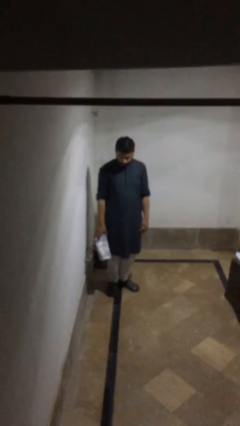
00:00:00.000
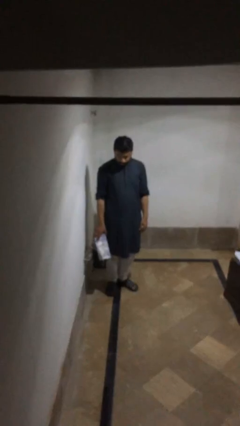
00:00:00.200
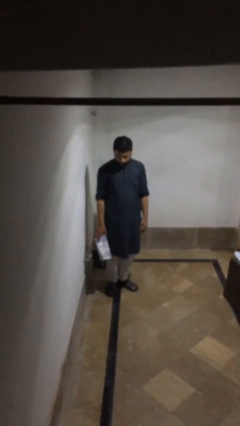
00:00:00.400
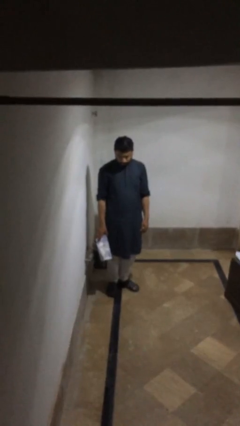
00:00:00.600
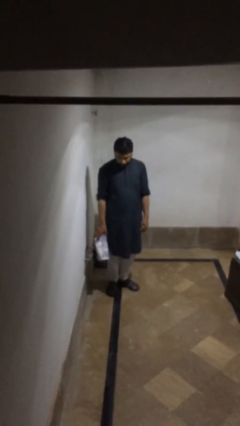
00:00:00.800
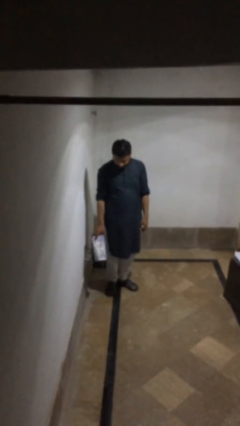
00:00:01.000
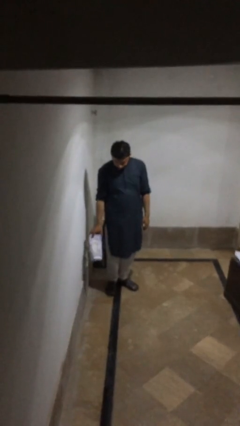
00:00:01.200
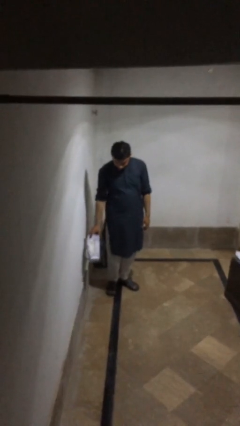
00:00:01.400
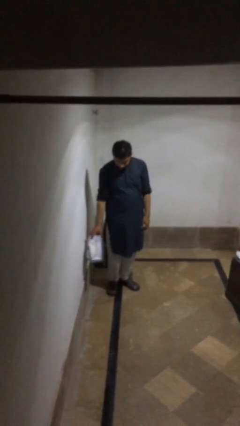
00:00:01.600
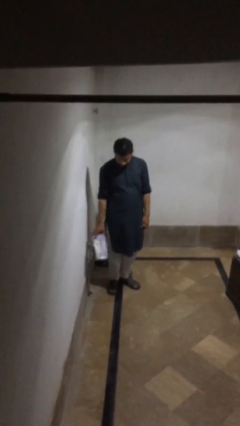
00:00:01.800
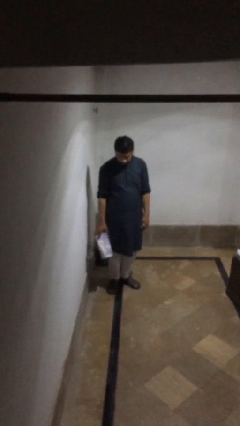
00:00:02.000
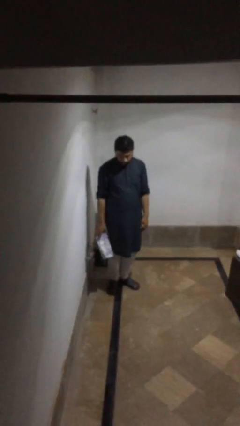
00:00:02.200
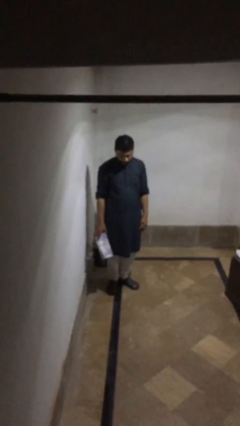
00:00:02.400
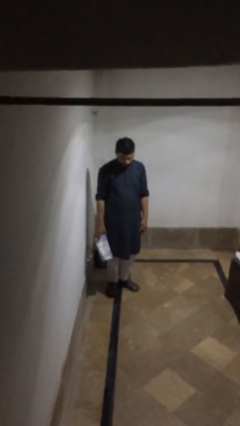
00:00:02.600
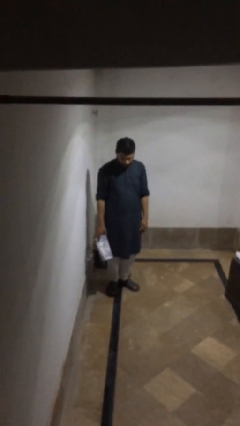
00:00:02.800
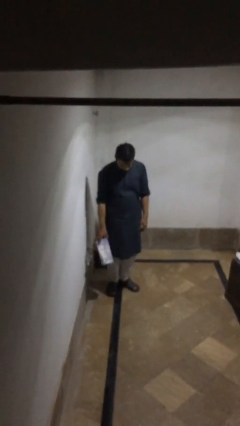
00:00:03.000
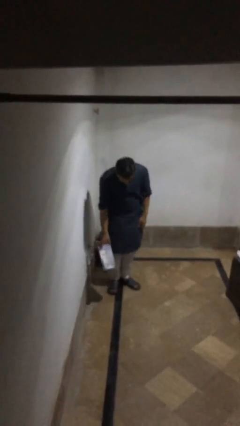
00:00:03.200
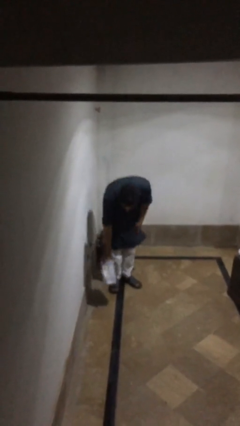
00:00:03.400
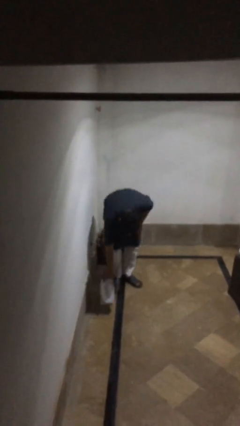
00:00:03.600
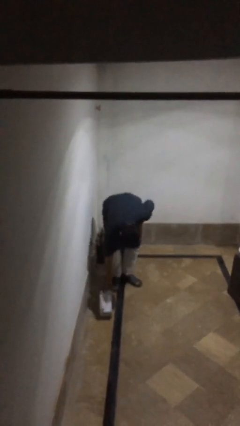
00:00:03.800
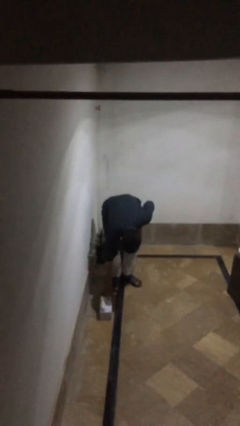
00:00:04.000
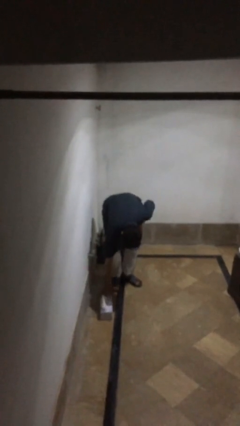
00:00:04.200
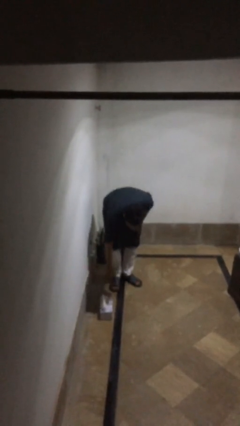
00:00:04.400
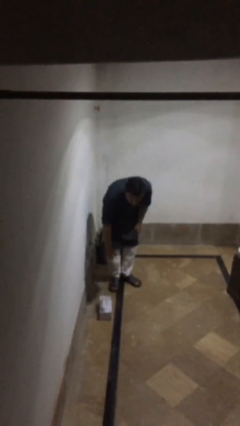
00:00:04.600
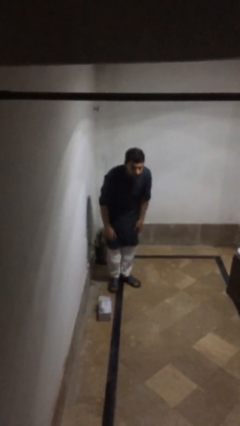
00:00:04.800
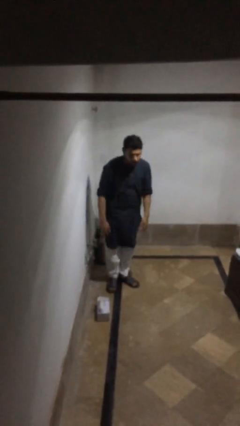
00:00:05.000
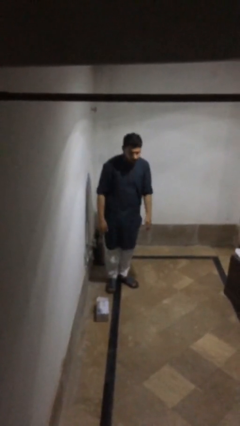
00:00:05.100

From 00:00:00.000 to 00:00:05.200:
person puts down object on floor

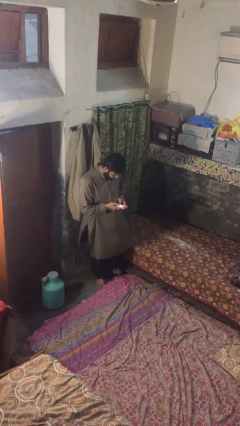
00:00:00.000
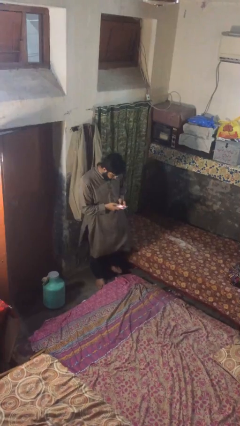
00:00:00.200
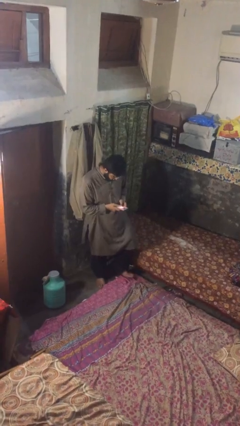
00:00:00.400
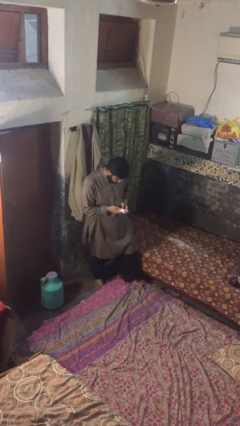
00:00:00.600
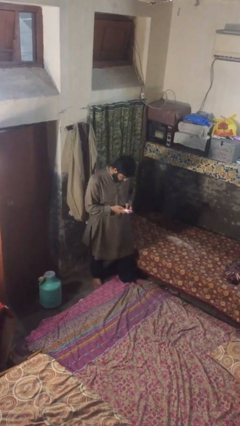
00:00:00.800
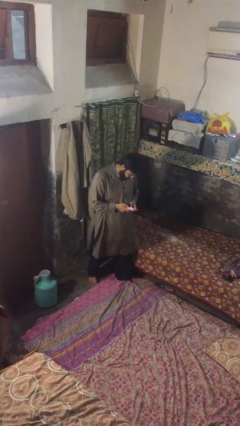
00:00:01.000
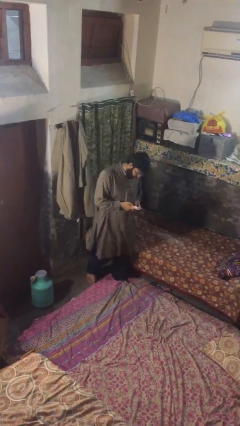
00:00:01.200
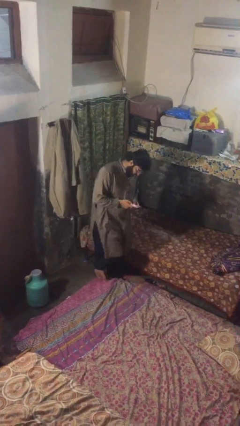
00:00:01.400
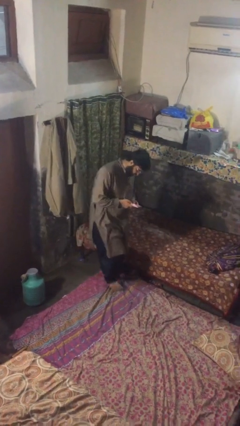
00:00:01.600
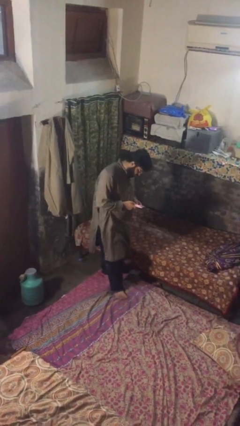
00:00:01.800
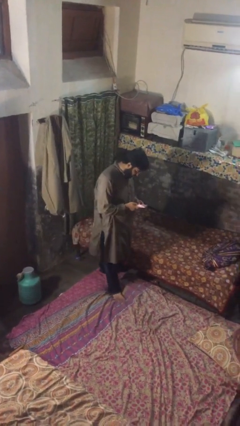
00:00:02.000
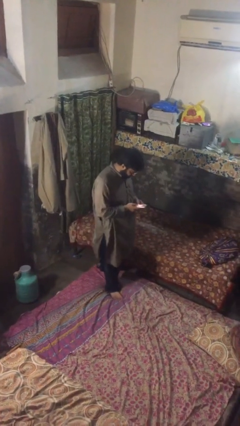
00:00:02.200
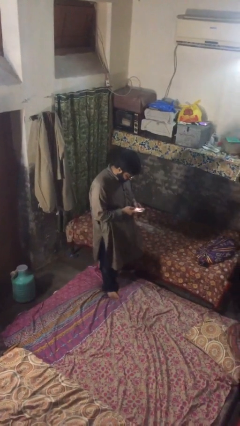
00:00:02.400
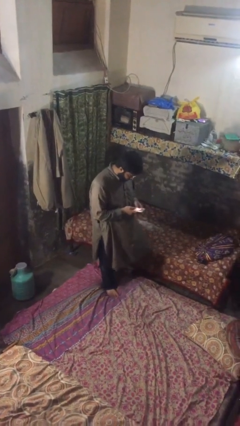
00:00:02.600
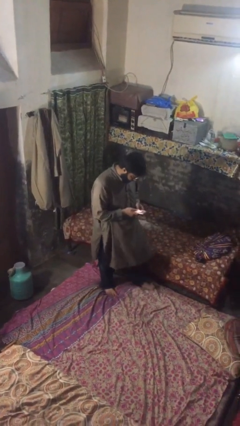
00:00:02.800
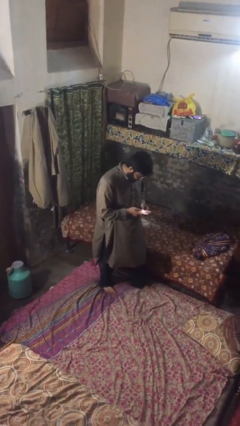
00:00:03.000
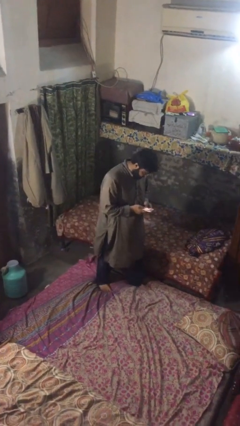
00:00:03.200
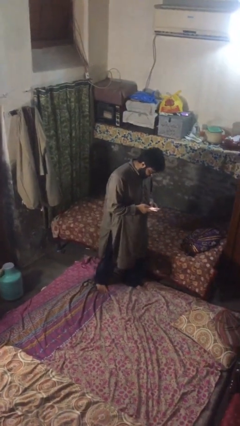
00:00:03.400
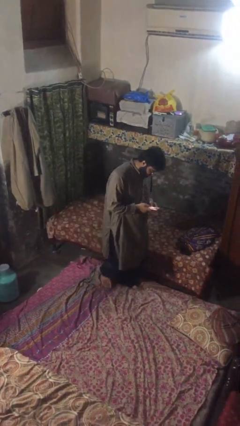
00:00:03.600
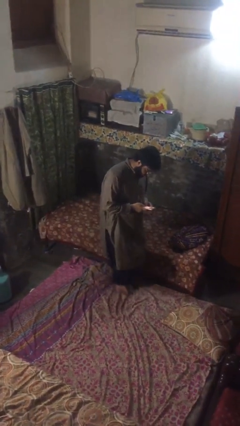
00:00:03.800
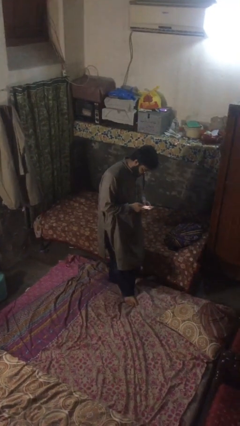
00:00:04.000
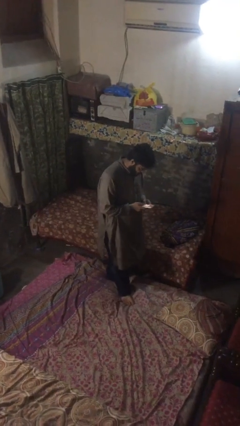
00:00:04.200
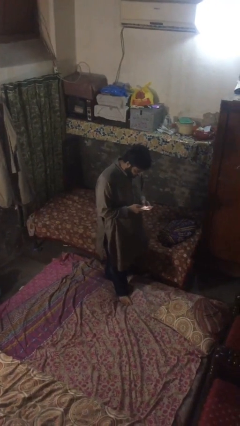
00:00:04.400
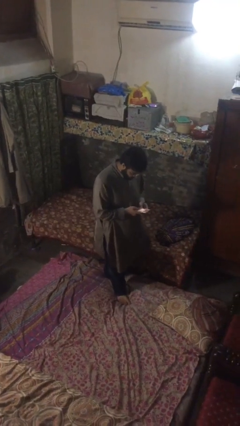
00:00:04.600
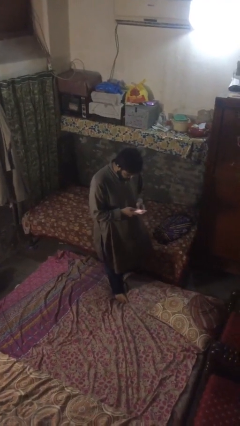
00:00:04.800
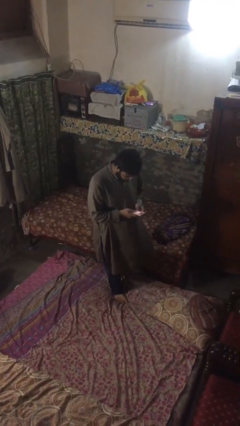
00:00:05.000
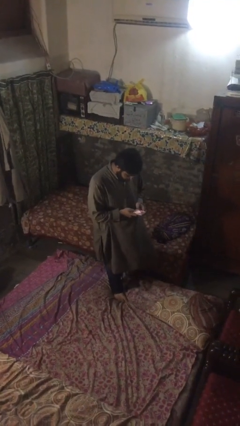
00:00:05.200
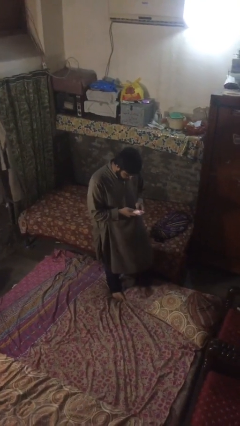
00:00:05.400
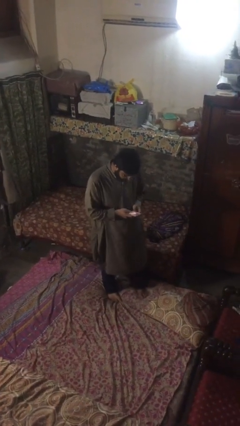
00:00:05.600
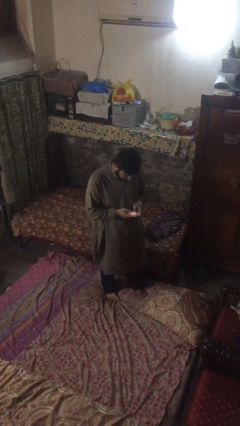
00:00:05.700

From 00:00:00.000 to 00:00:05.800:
person texts on phone

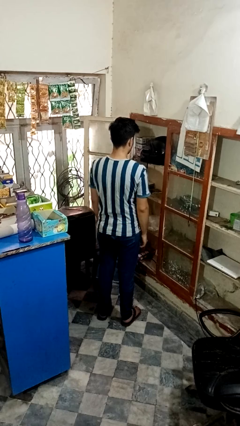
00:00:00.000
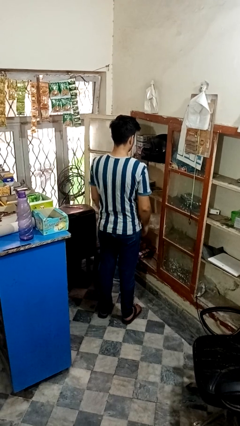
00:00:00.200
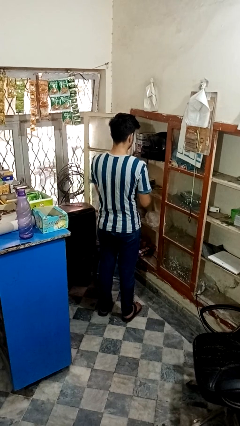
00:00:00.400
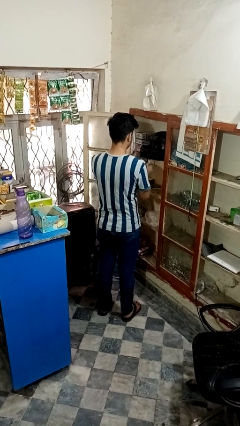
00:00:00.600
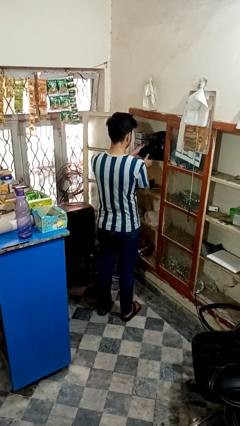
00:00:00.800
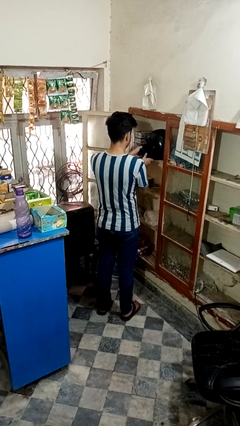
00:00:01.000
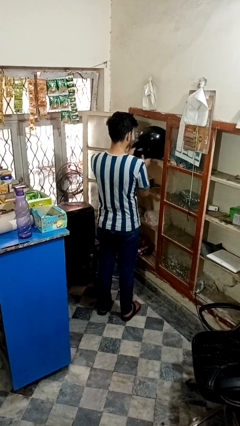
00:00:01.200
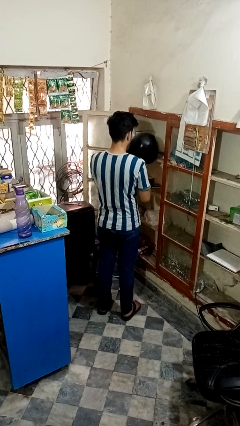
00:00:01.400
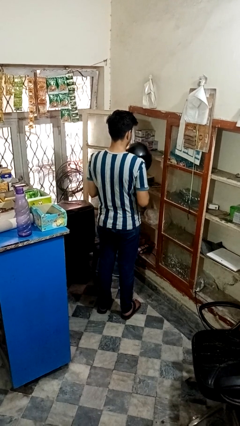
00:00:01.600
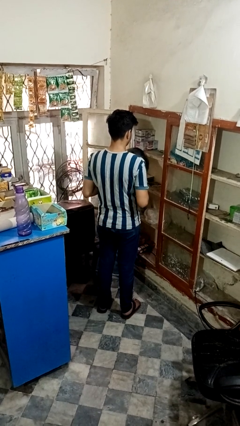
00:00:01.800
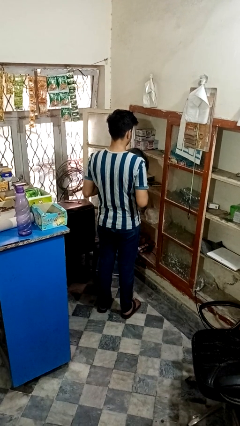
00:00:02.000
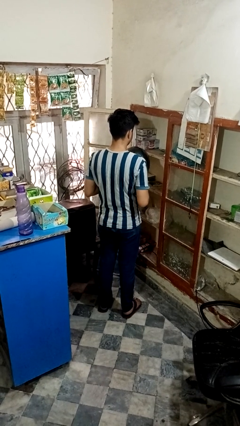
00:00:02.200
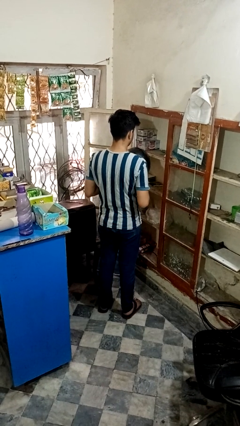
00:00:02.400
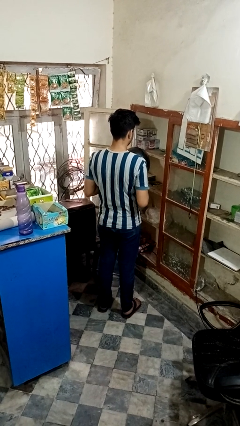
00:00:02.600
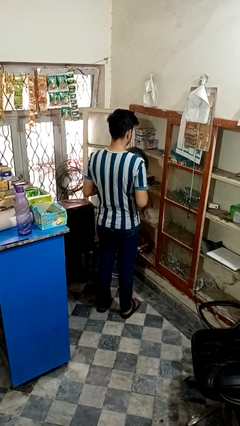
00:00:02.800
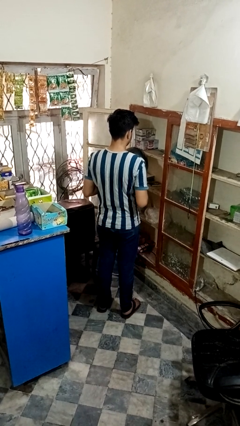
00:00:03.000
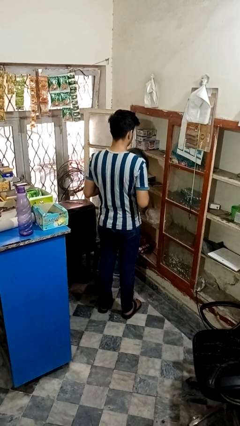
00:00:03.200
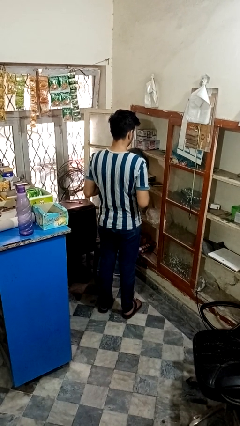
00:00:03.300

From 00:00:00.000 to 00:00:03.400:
person picks up object from shelf

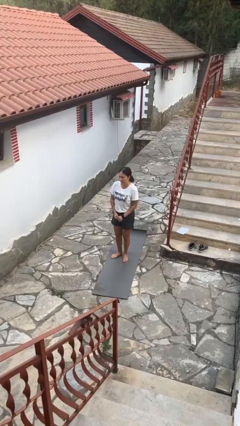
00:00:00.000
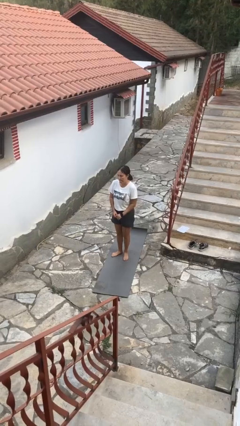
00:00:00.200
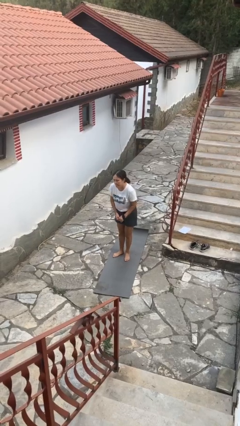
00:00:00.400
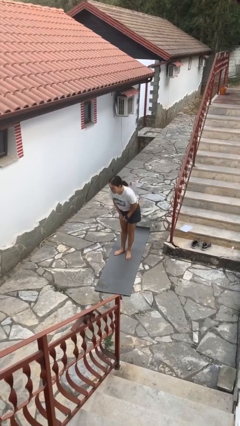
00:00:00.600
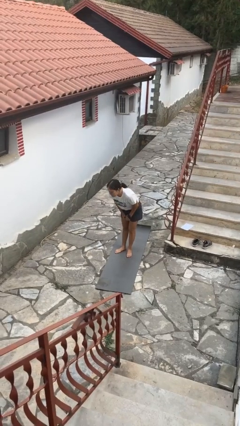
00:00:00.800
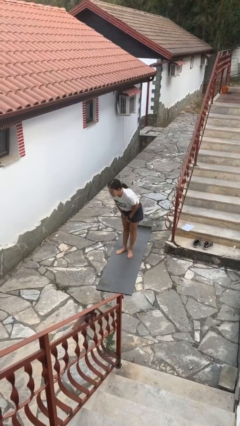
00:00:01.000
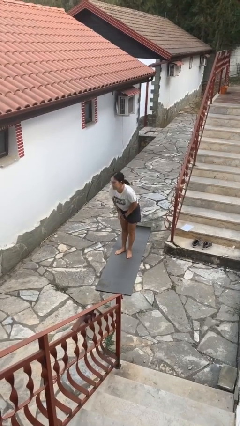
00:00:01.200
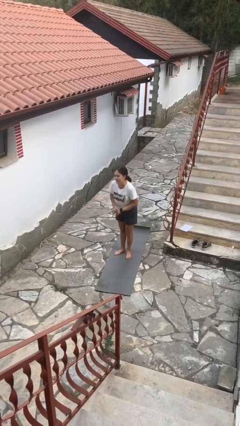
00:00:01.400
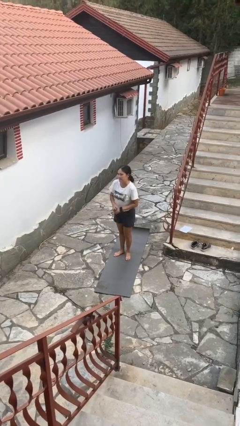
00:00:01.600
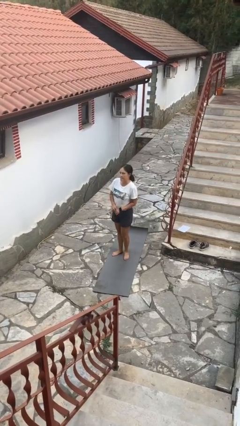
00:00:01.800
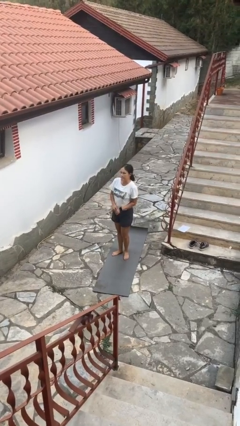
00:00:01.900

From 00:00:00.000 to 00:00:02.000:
person bows

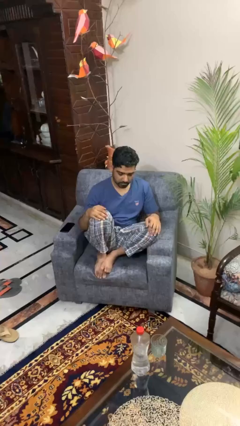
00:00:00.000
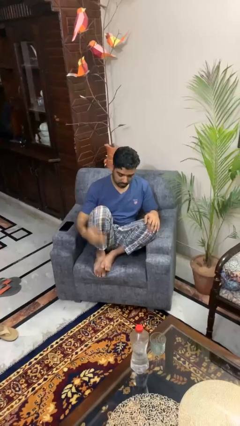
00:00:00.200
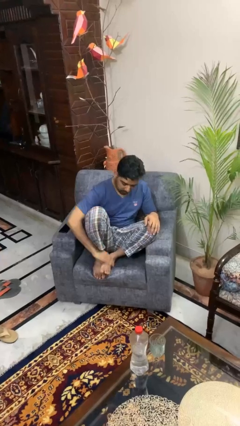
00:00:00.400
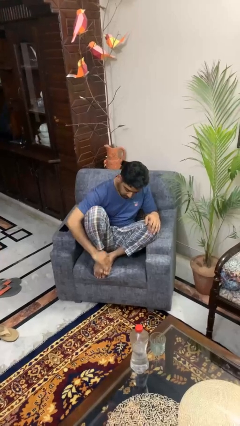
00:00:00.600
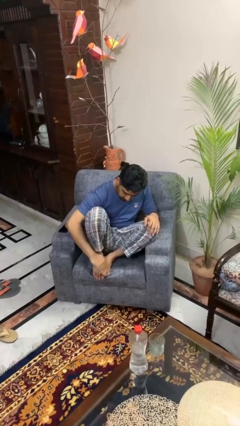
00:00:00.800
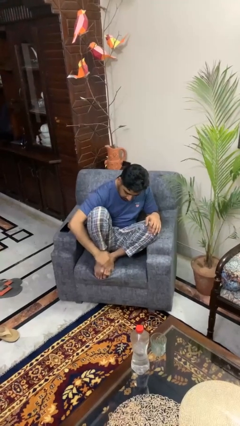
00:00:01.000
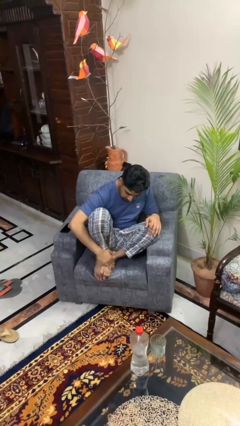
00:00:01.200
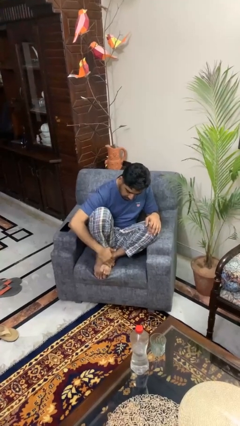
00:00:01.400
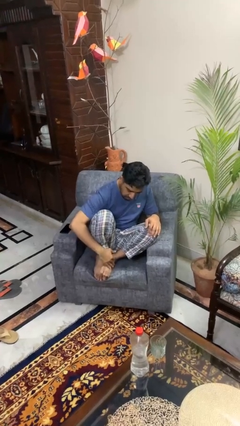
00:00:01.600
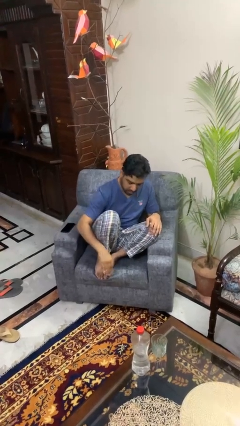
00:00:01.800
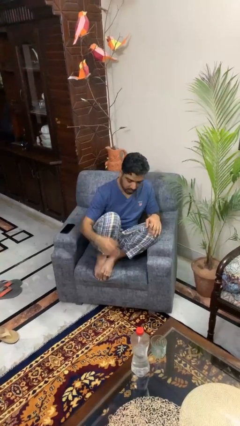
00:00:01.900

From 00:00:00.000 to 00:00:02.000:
person rubs foot
